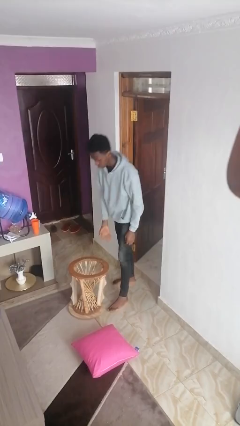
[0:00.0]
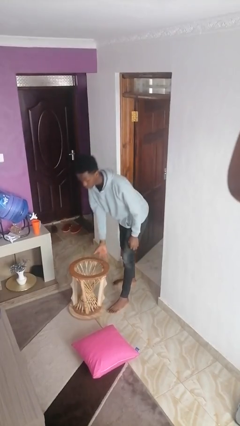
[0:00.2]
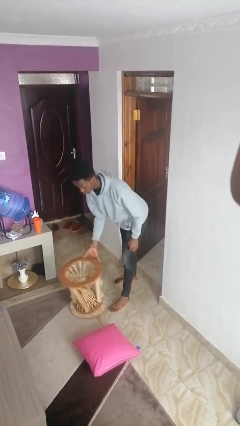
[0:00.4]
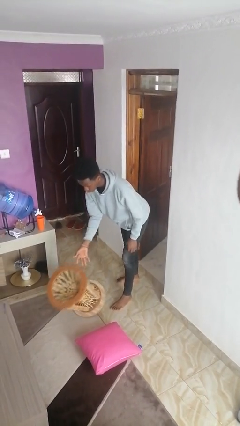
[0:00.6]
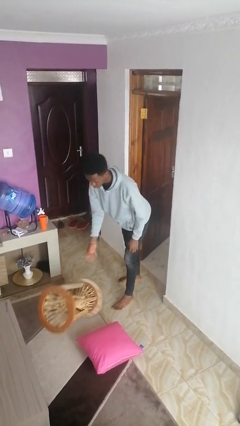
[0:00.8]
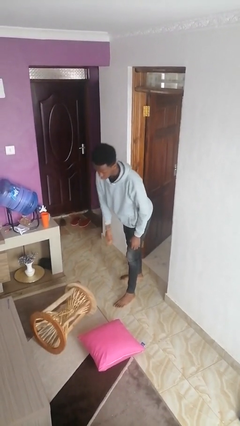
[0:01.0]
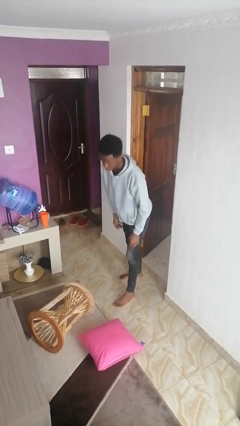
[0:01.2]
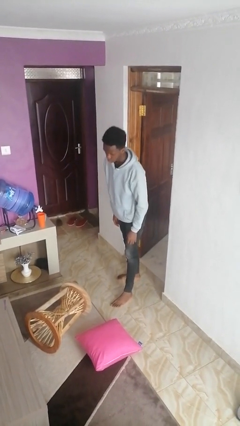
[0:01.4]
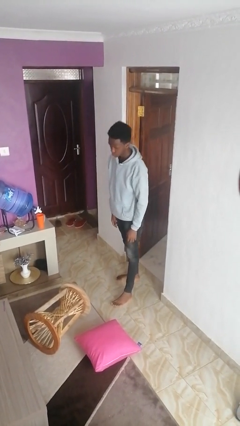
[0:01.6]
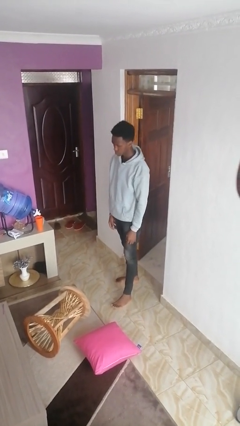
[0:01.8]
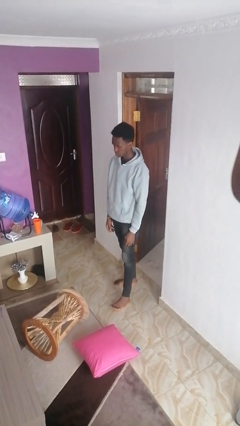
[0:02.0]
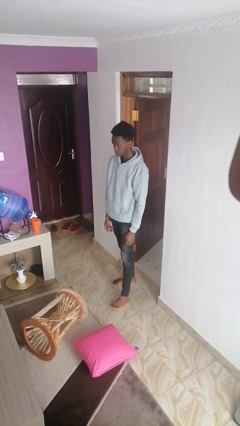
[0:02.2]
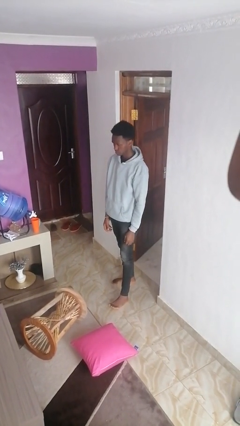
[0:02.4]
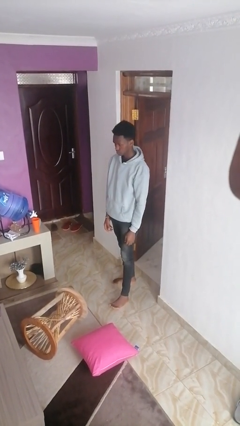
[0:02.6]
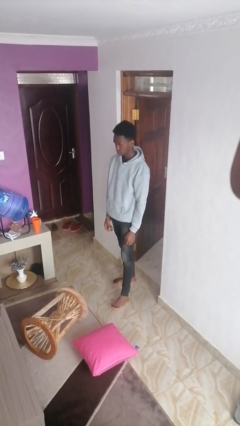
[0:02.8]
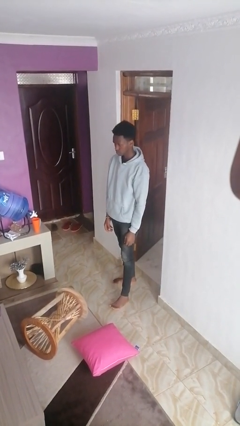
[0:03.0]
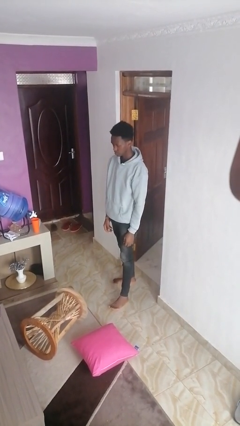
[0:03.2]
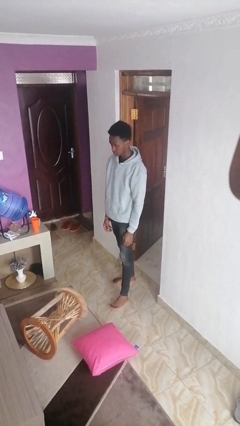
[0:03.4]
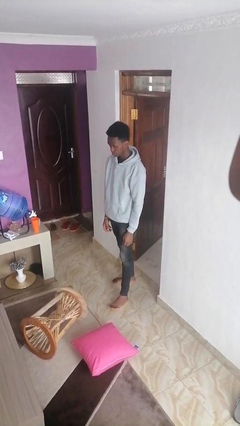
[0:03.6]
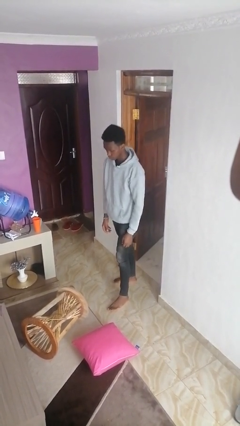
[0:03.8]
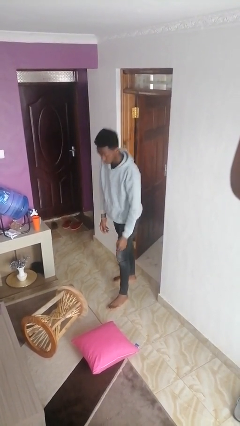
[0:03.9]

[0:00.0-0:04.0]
person knocks over furniture

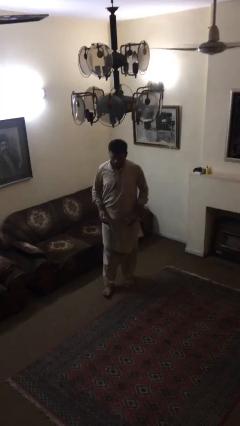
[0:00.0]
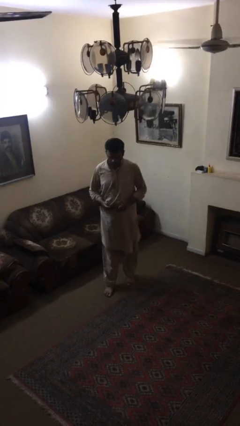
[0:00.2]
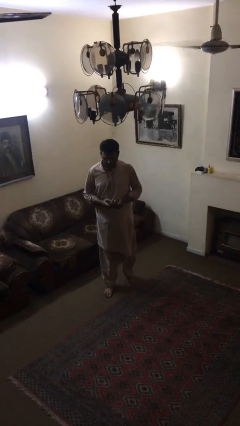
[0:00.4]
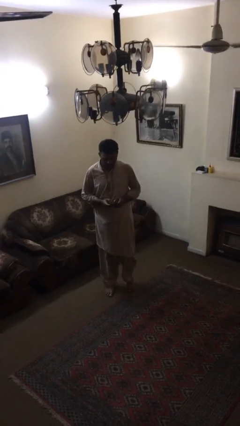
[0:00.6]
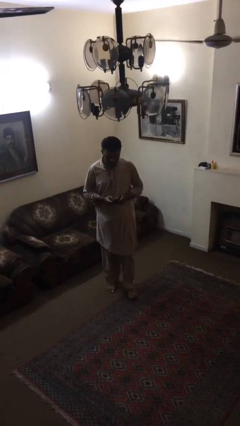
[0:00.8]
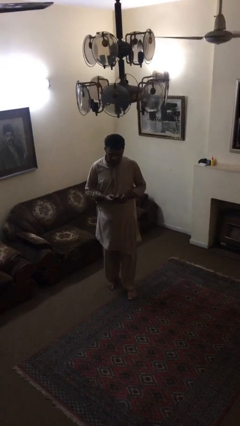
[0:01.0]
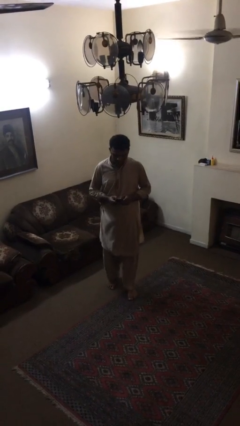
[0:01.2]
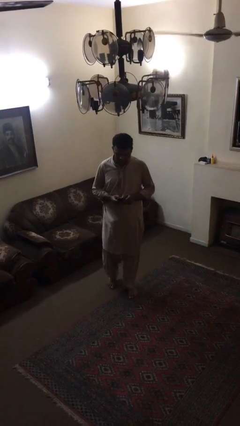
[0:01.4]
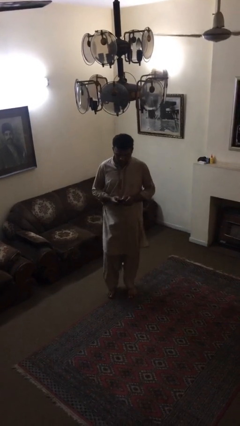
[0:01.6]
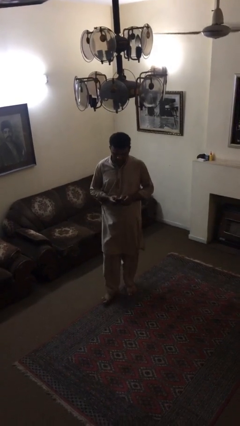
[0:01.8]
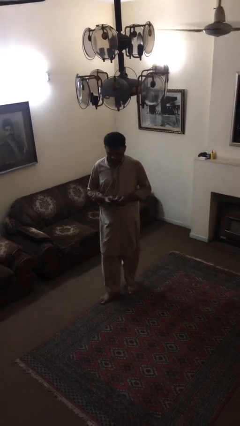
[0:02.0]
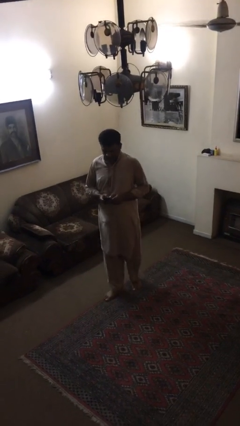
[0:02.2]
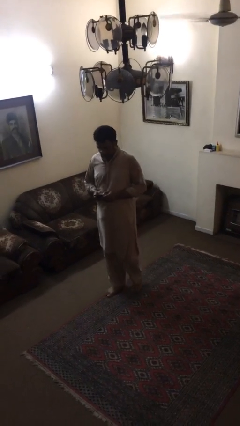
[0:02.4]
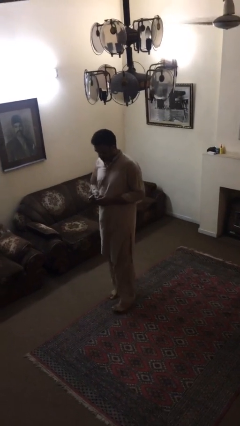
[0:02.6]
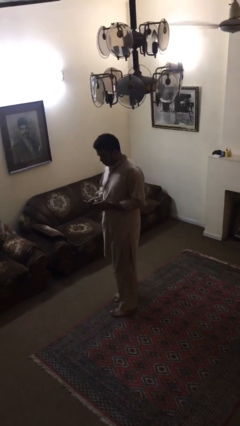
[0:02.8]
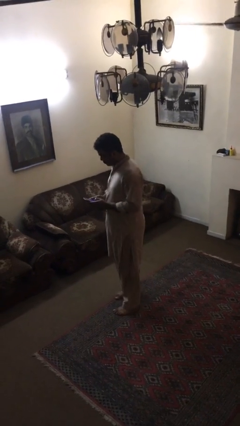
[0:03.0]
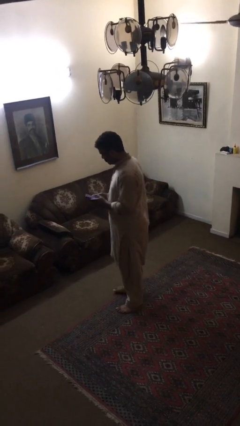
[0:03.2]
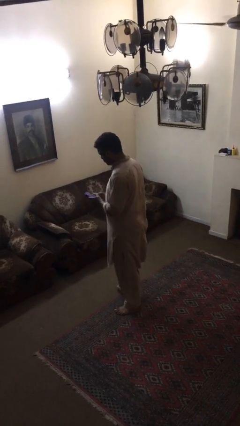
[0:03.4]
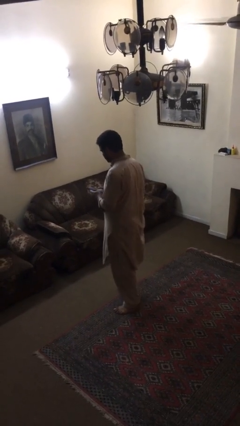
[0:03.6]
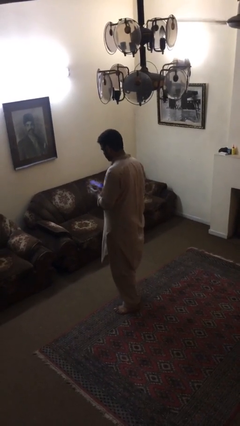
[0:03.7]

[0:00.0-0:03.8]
person texts on phone

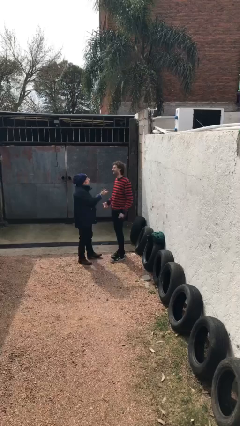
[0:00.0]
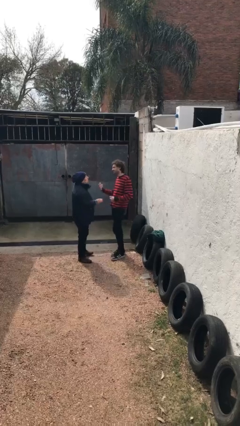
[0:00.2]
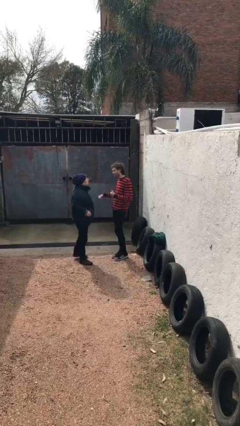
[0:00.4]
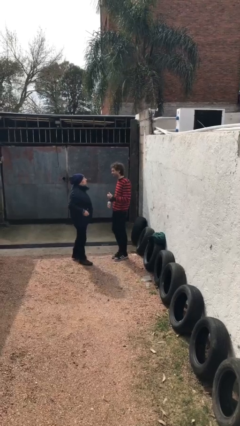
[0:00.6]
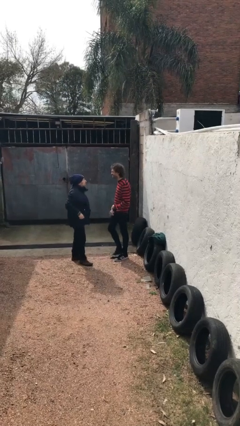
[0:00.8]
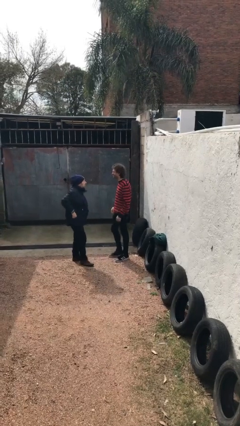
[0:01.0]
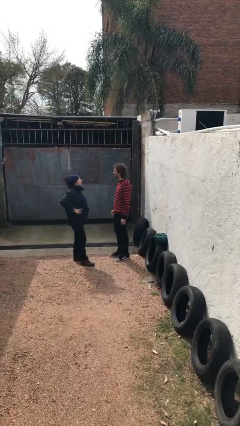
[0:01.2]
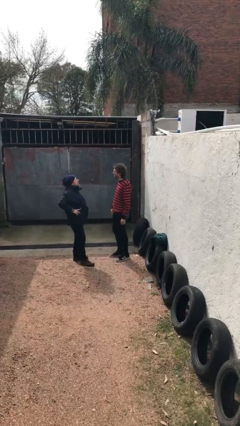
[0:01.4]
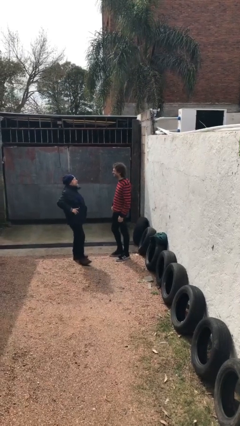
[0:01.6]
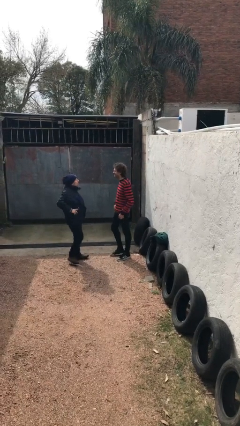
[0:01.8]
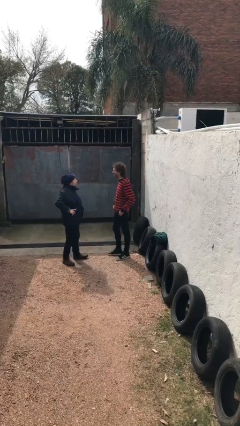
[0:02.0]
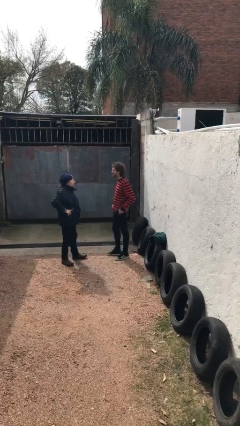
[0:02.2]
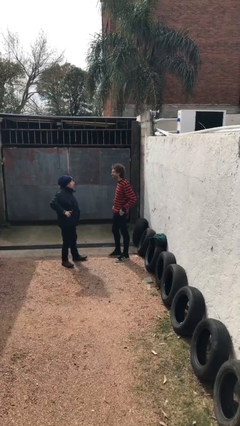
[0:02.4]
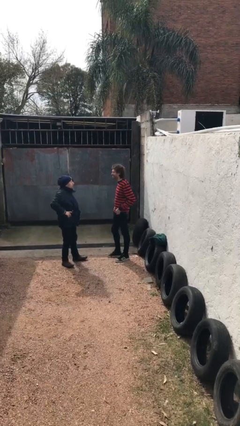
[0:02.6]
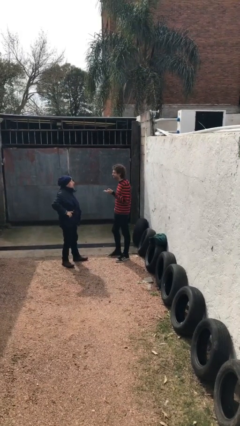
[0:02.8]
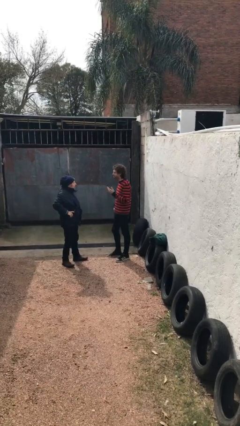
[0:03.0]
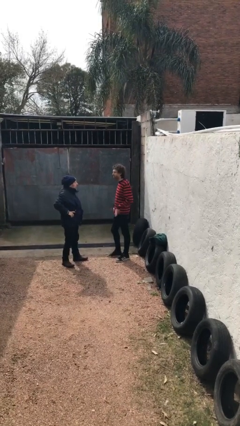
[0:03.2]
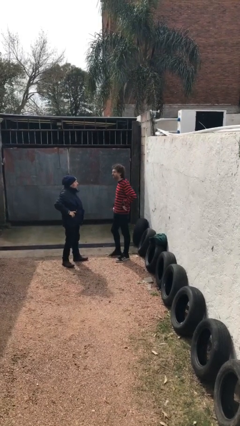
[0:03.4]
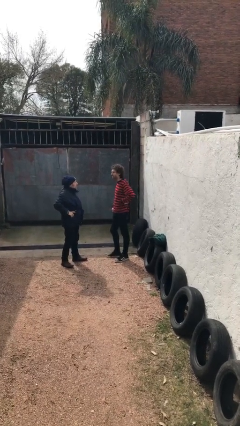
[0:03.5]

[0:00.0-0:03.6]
person talks to person

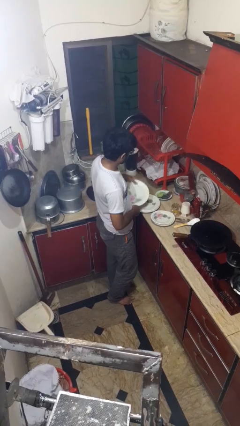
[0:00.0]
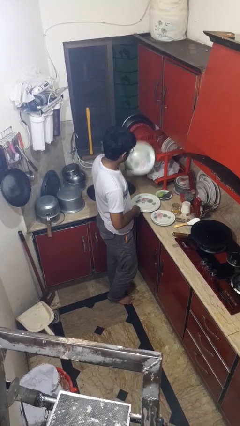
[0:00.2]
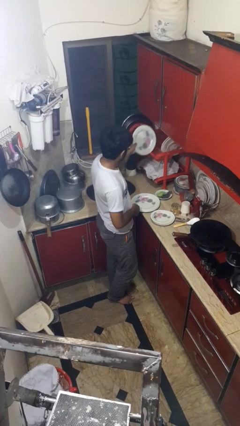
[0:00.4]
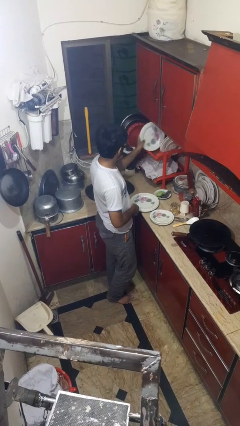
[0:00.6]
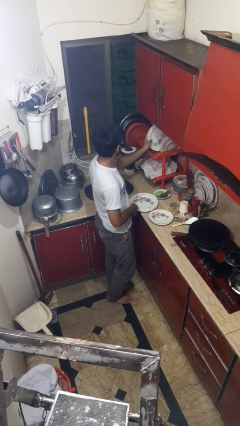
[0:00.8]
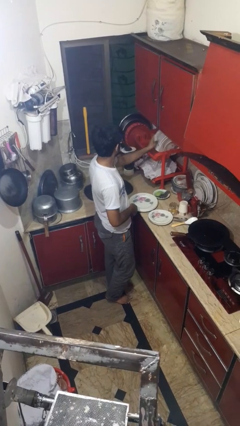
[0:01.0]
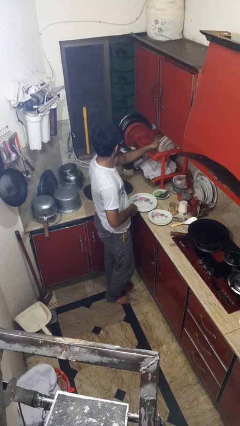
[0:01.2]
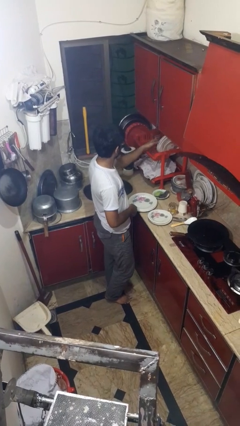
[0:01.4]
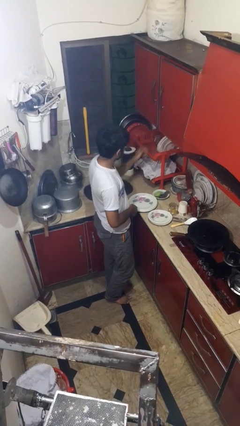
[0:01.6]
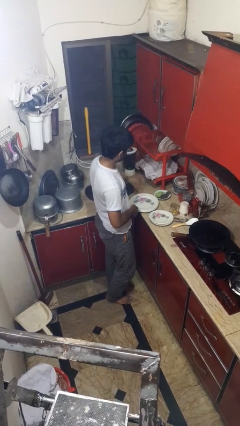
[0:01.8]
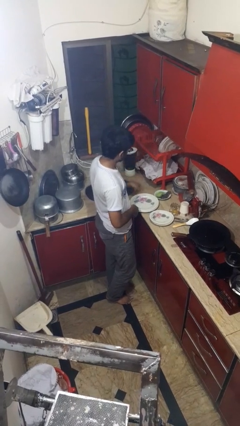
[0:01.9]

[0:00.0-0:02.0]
person loads dishwasher

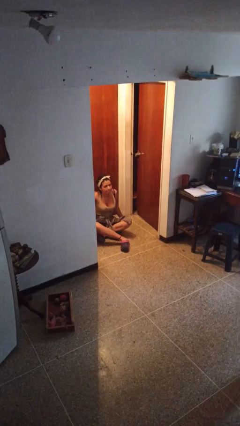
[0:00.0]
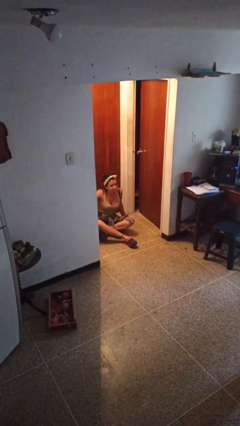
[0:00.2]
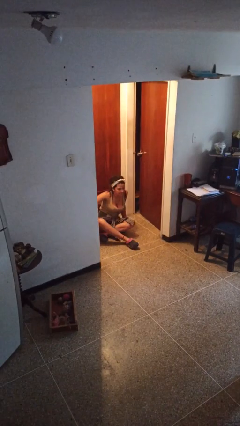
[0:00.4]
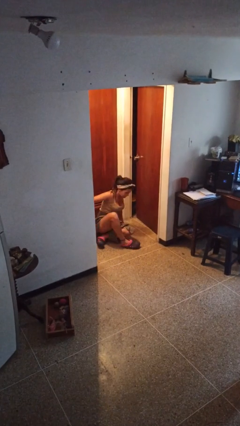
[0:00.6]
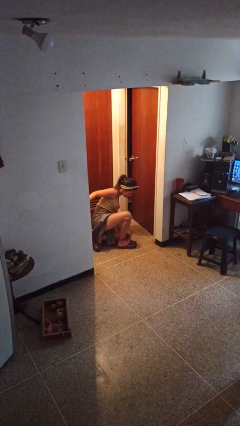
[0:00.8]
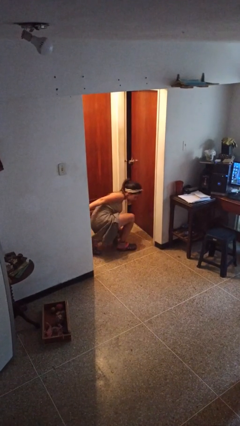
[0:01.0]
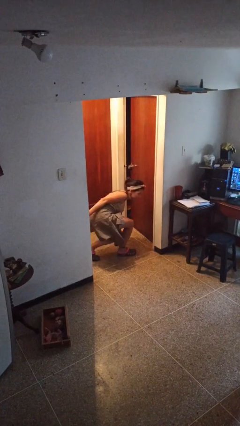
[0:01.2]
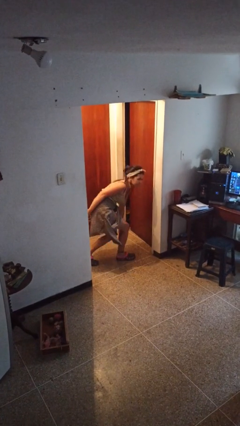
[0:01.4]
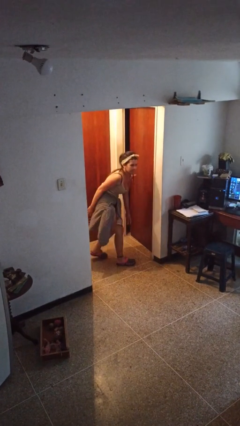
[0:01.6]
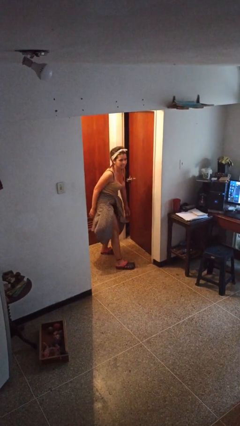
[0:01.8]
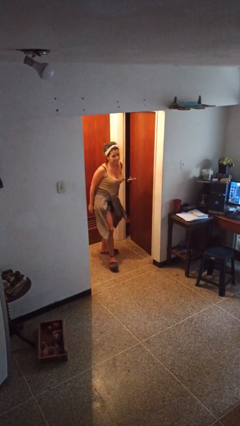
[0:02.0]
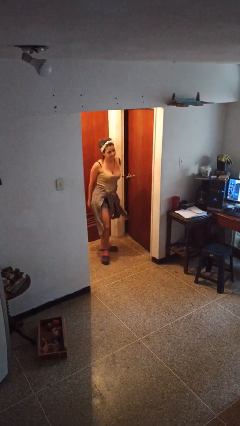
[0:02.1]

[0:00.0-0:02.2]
person stands up

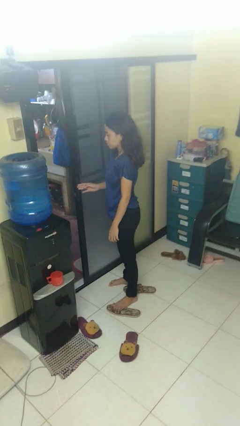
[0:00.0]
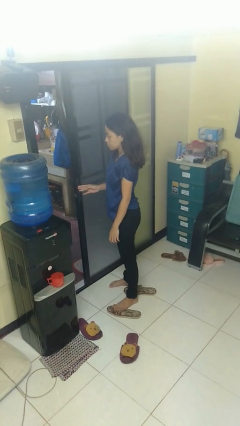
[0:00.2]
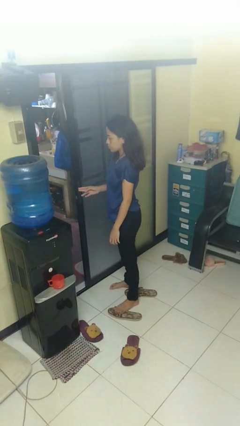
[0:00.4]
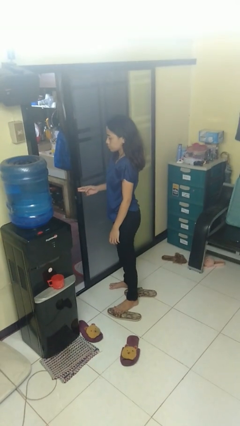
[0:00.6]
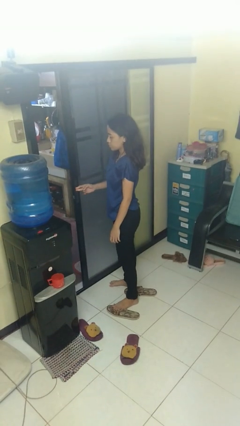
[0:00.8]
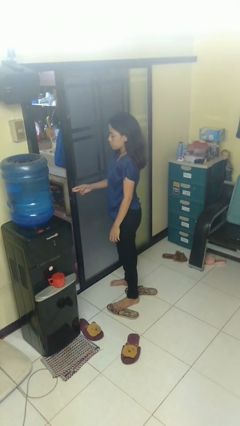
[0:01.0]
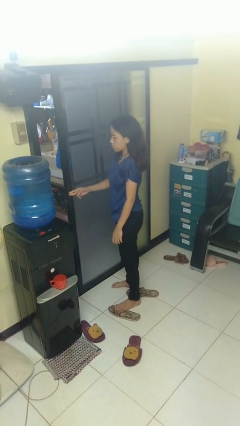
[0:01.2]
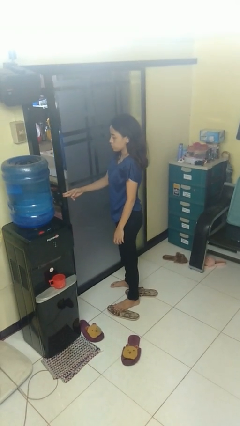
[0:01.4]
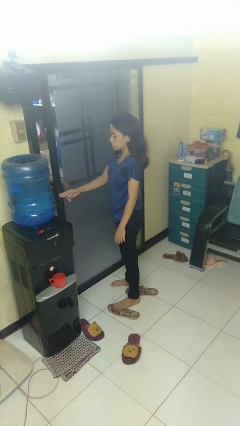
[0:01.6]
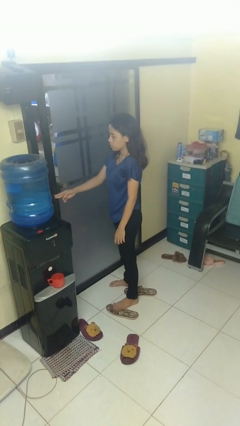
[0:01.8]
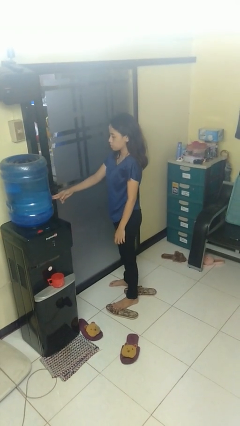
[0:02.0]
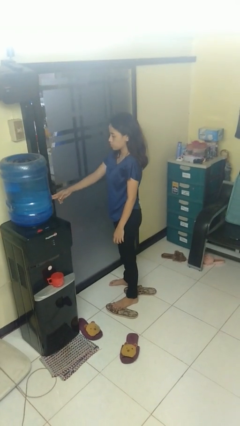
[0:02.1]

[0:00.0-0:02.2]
person closes sliding door
